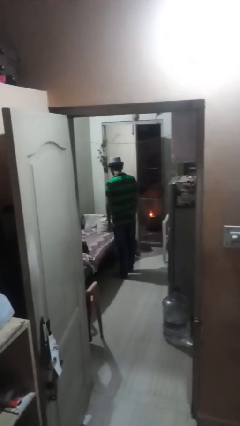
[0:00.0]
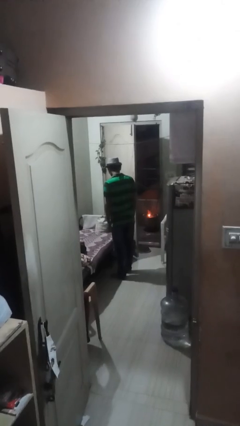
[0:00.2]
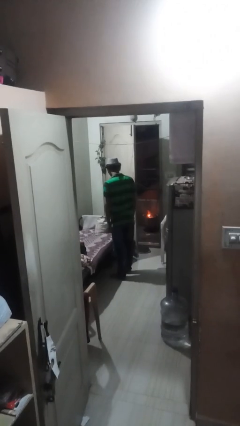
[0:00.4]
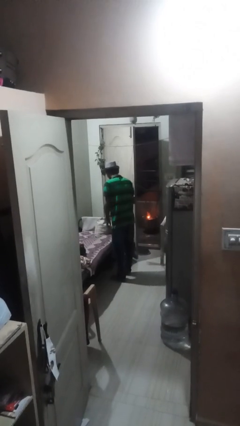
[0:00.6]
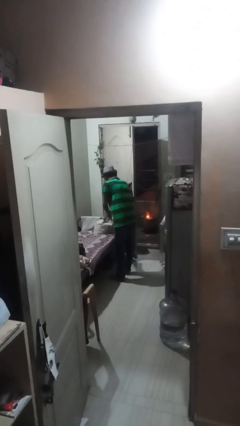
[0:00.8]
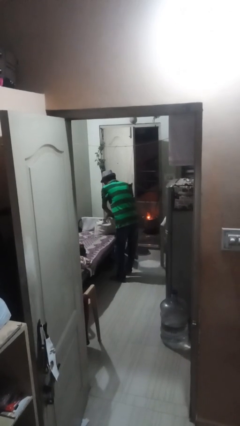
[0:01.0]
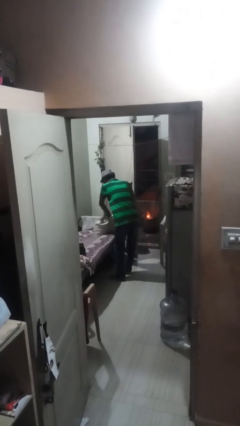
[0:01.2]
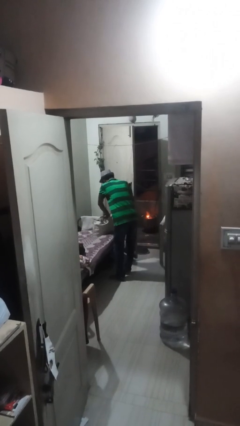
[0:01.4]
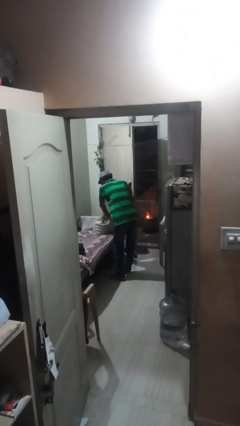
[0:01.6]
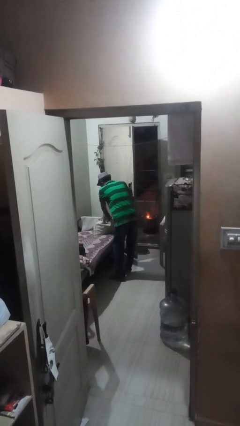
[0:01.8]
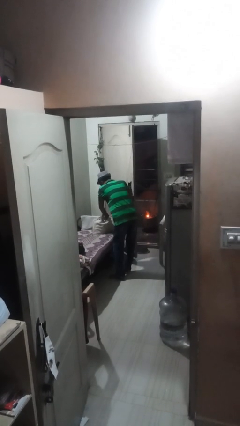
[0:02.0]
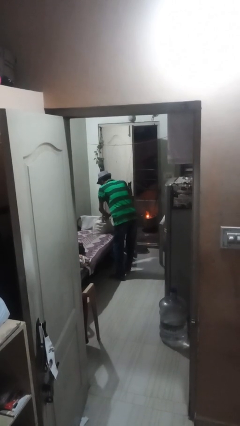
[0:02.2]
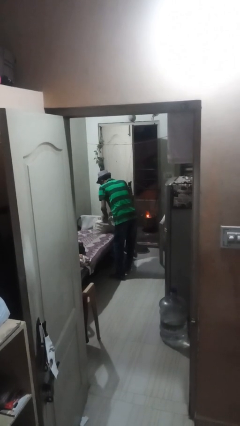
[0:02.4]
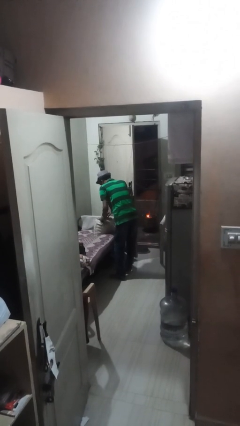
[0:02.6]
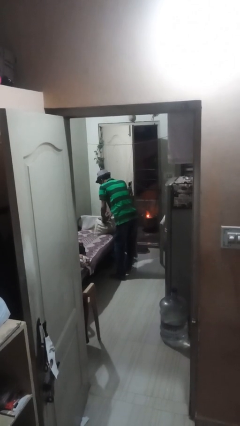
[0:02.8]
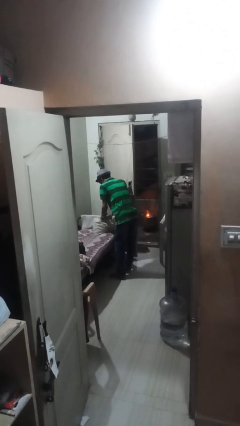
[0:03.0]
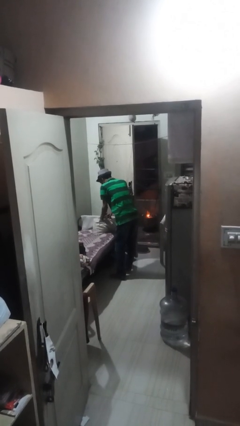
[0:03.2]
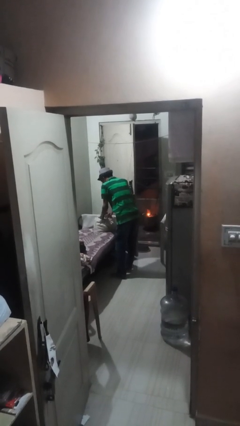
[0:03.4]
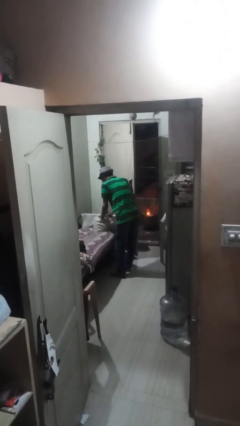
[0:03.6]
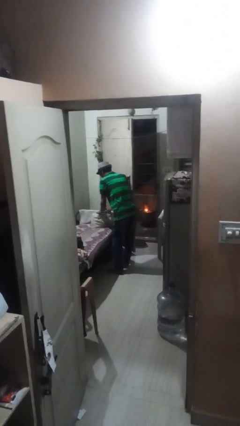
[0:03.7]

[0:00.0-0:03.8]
person searches in bag

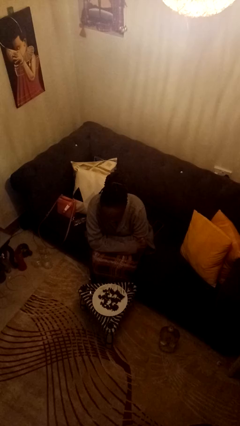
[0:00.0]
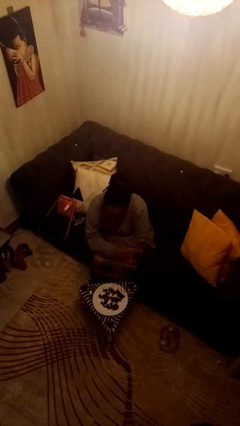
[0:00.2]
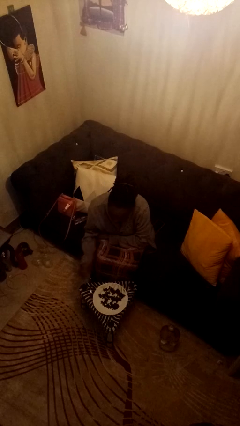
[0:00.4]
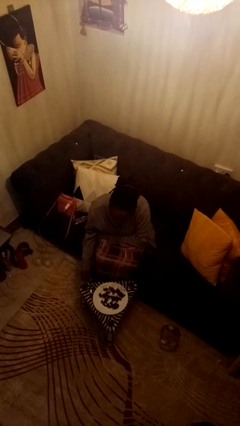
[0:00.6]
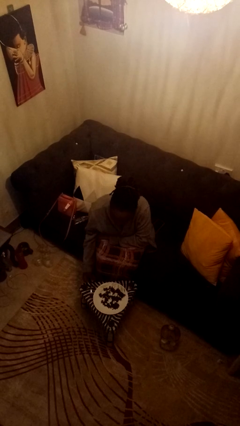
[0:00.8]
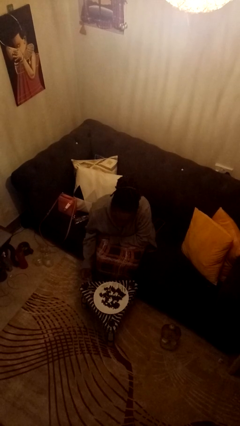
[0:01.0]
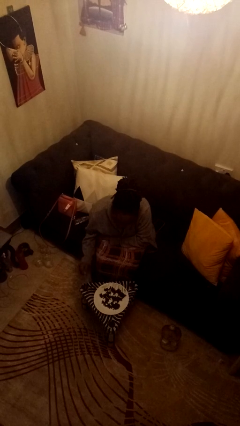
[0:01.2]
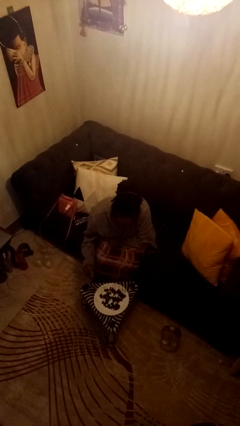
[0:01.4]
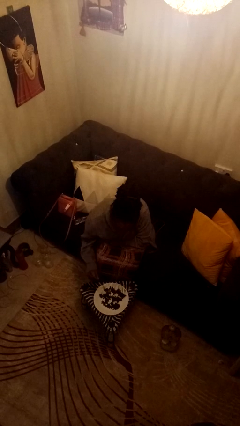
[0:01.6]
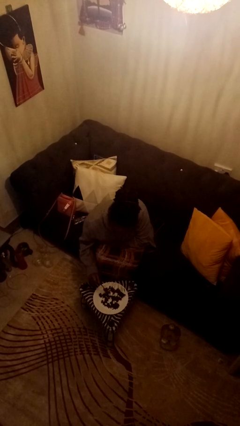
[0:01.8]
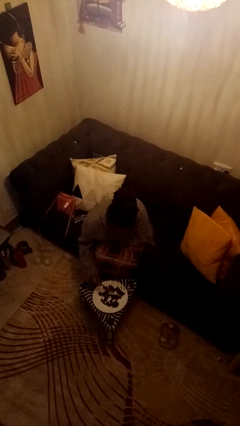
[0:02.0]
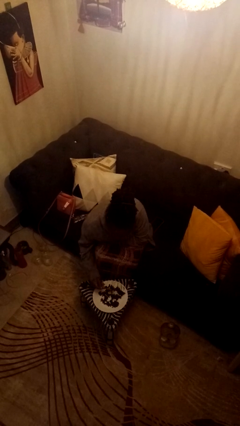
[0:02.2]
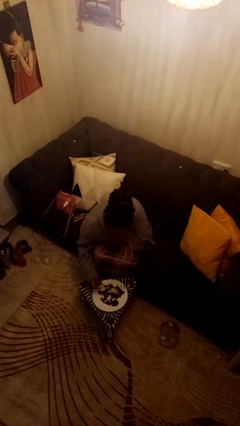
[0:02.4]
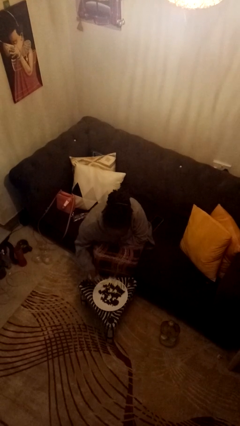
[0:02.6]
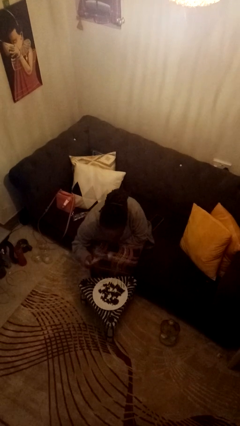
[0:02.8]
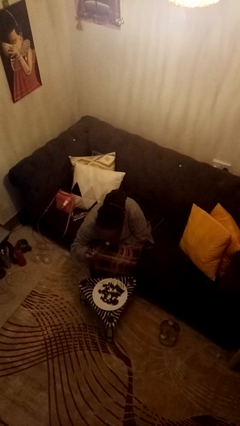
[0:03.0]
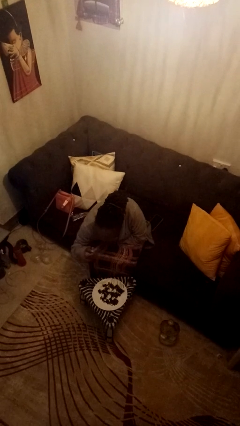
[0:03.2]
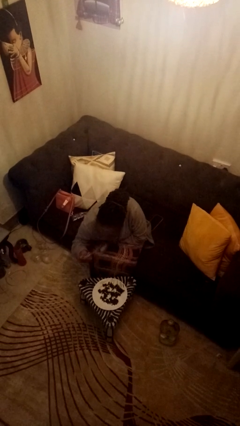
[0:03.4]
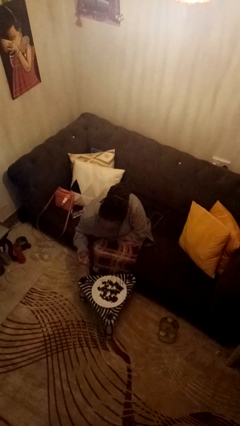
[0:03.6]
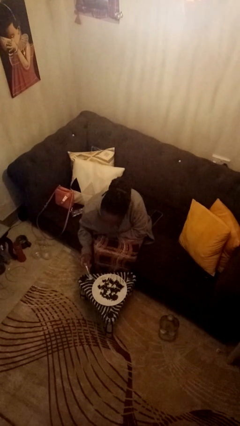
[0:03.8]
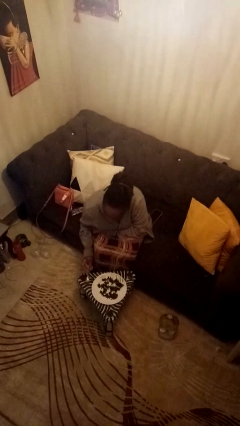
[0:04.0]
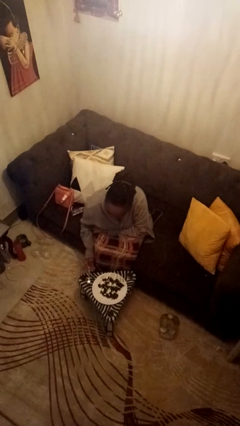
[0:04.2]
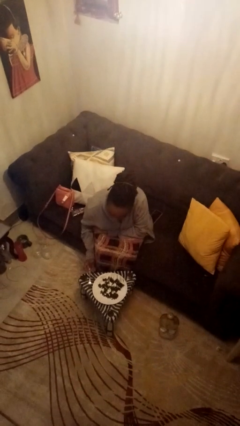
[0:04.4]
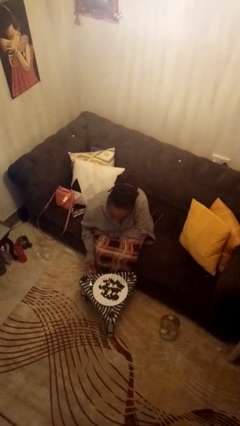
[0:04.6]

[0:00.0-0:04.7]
person eats with utensil

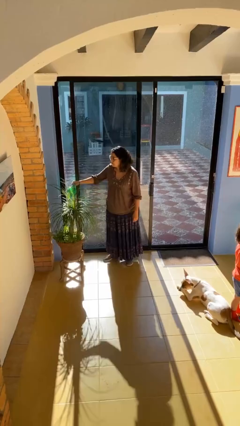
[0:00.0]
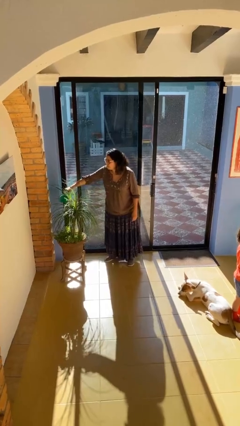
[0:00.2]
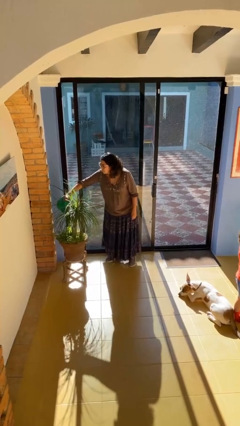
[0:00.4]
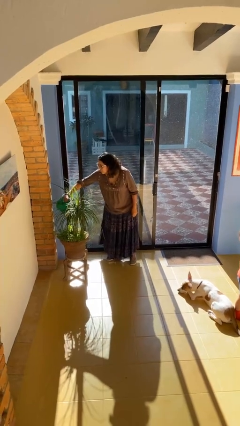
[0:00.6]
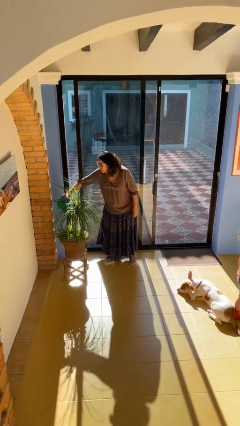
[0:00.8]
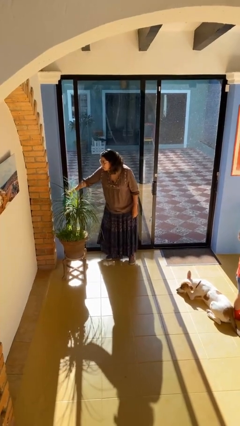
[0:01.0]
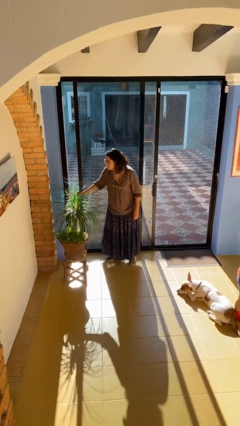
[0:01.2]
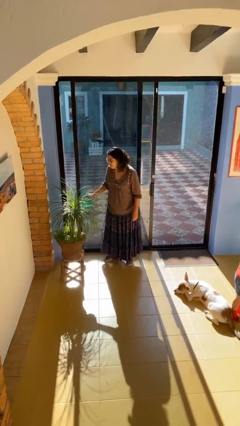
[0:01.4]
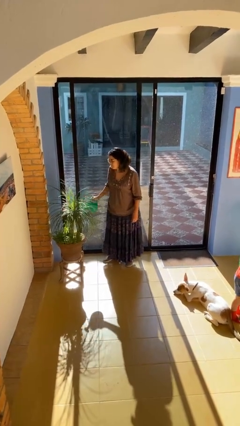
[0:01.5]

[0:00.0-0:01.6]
person waters houseplant

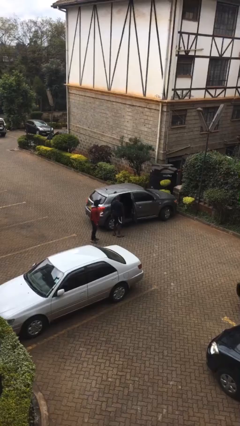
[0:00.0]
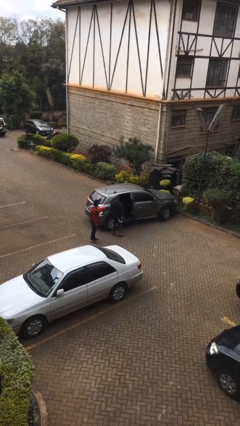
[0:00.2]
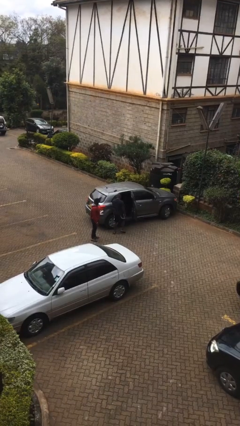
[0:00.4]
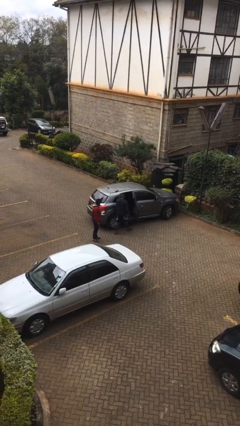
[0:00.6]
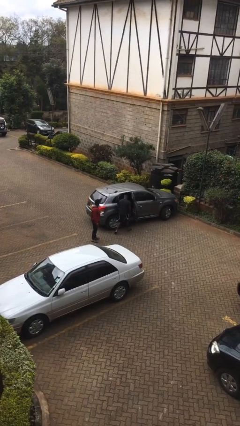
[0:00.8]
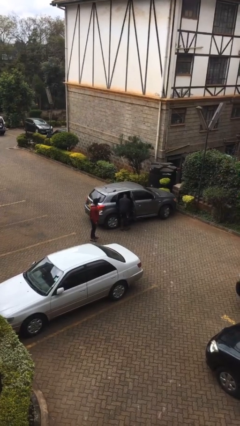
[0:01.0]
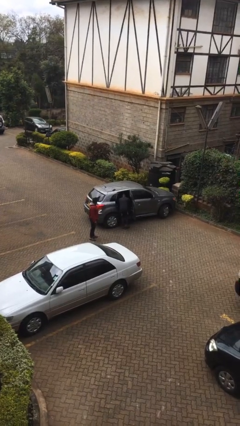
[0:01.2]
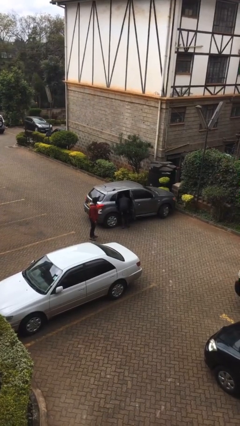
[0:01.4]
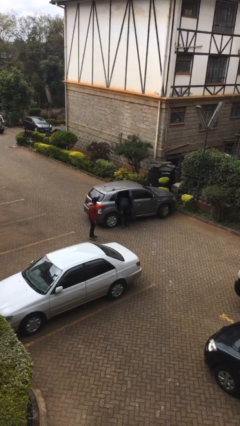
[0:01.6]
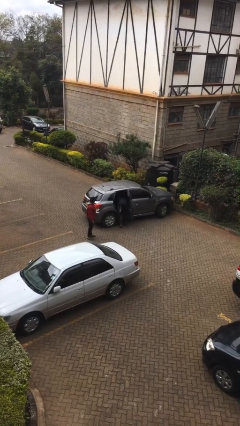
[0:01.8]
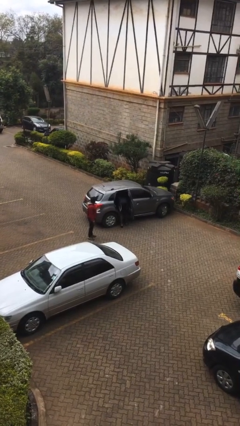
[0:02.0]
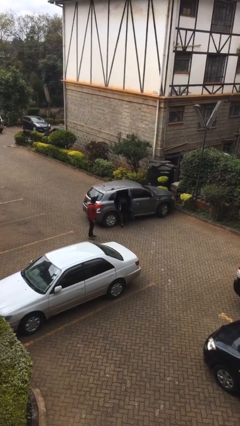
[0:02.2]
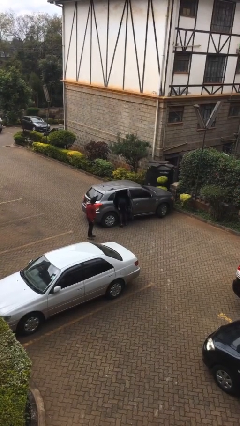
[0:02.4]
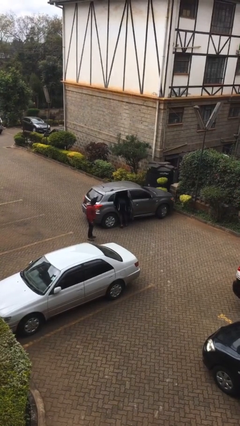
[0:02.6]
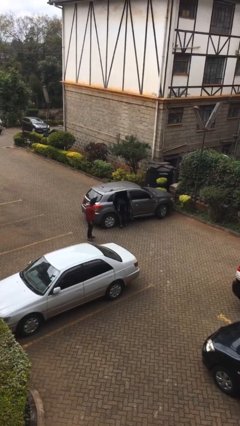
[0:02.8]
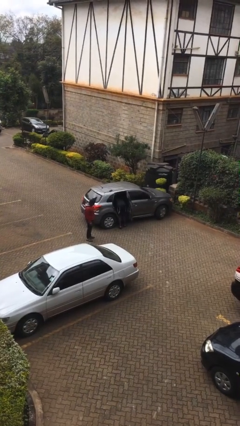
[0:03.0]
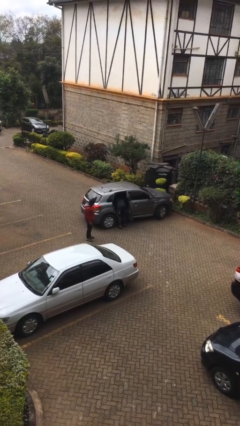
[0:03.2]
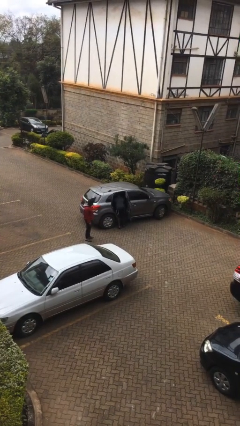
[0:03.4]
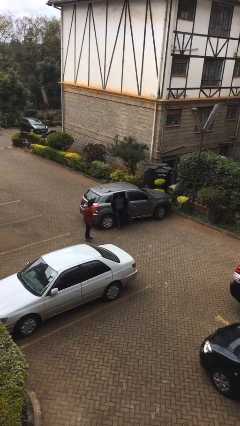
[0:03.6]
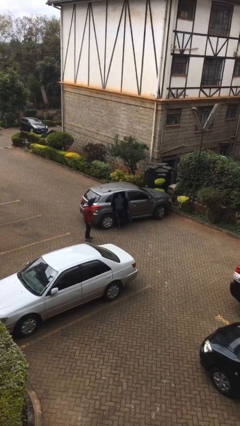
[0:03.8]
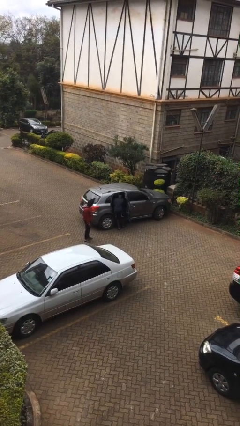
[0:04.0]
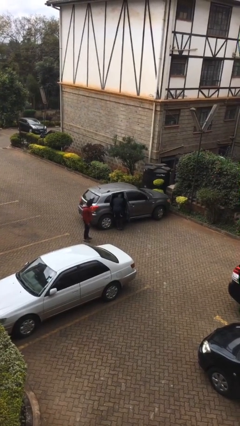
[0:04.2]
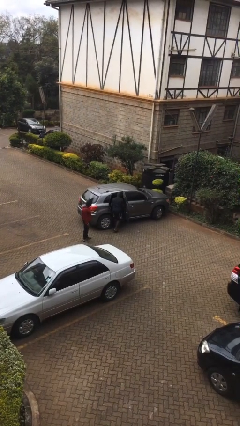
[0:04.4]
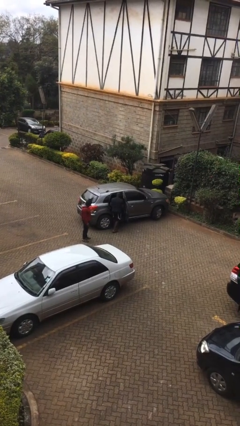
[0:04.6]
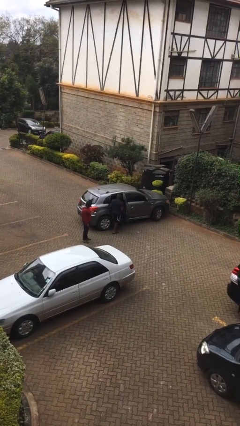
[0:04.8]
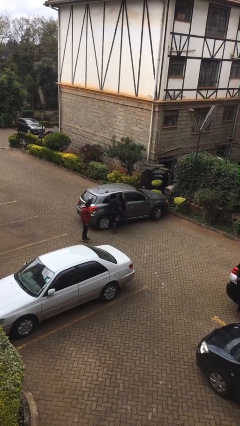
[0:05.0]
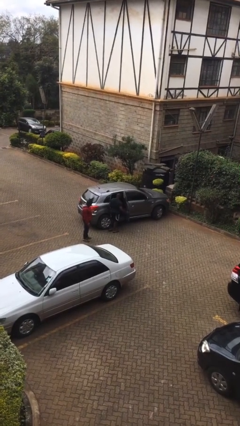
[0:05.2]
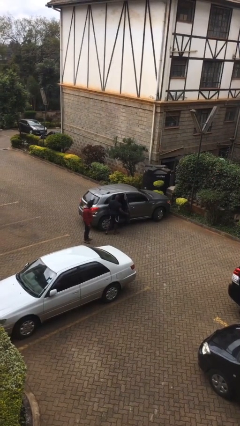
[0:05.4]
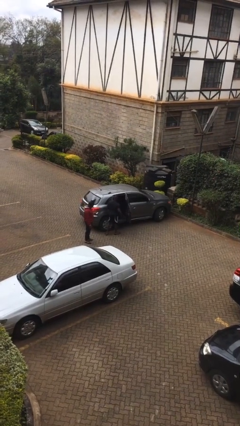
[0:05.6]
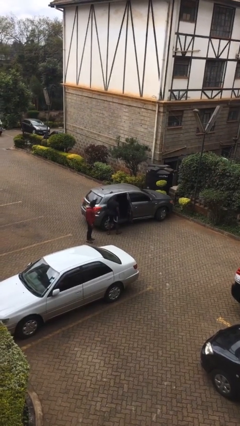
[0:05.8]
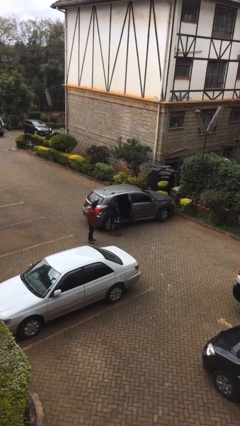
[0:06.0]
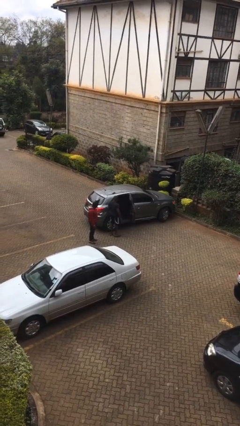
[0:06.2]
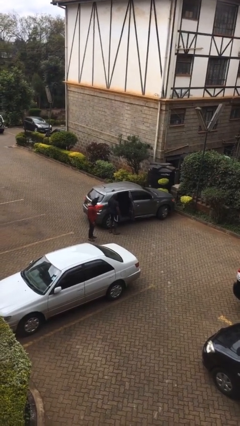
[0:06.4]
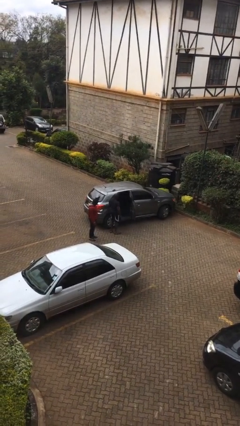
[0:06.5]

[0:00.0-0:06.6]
person unloads car

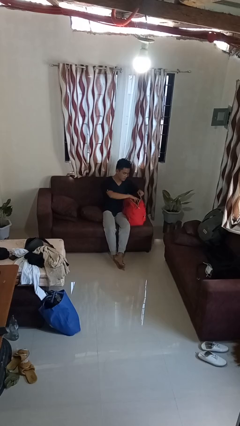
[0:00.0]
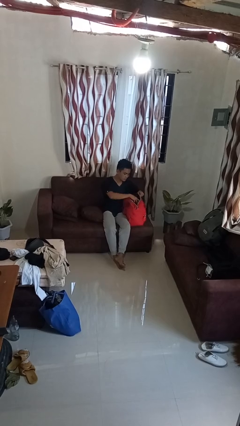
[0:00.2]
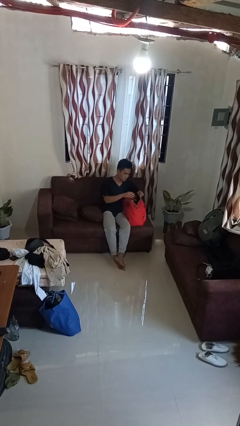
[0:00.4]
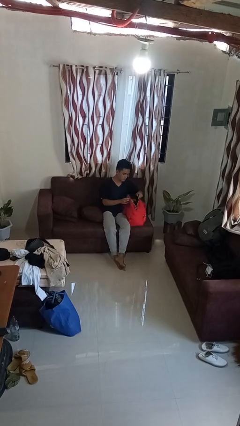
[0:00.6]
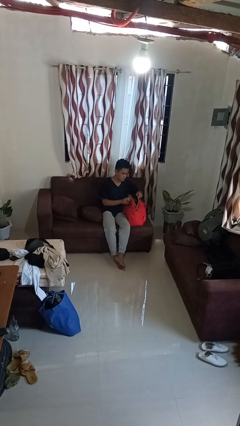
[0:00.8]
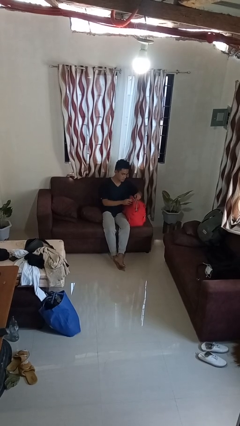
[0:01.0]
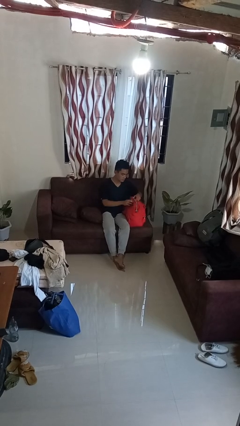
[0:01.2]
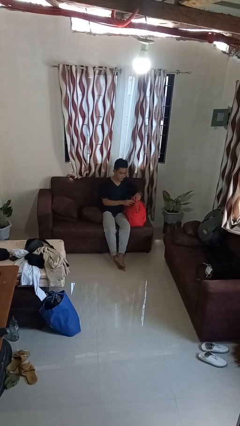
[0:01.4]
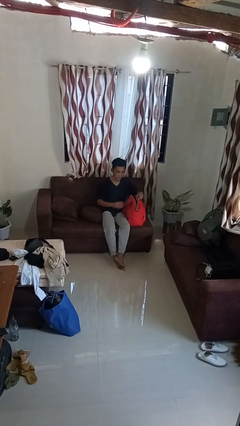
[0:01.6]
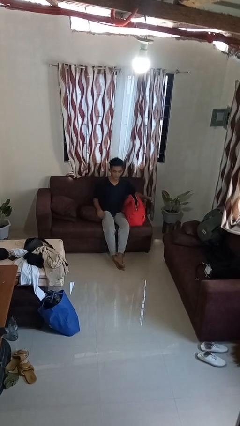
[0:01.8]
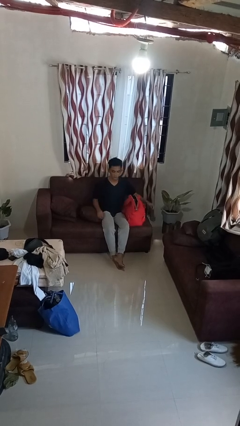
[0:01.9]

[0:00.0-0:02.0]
person puts object into backpack
